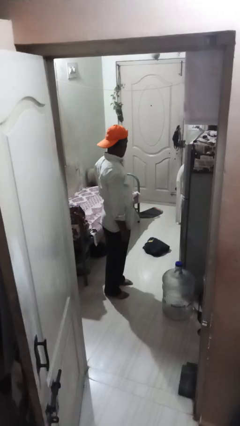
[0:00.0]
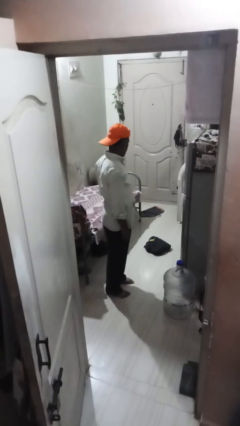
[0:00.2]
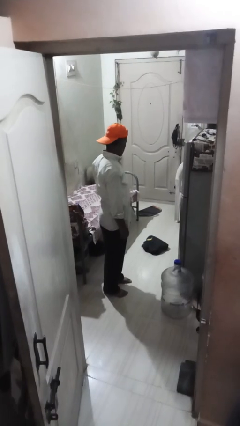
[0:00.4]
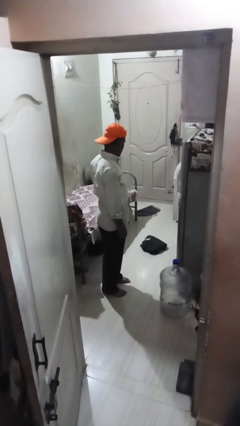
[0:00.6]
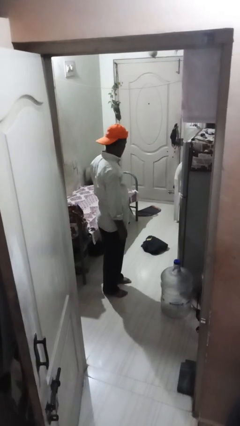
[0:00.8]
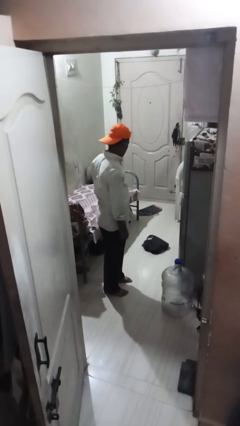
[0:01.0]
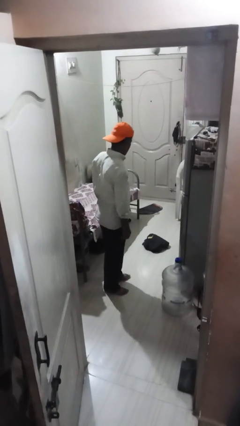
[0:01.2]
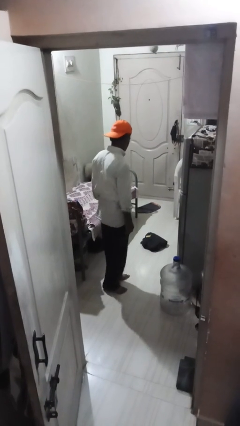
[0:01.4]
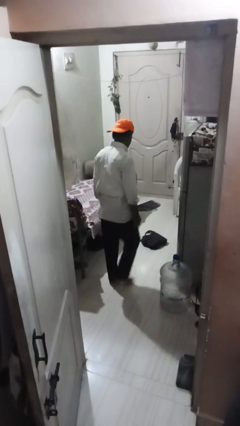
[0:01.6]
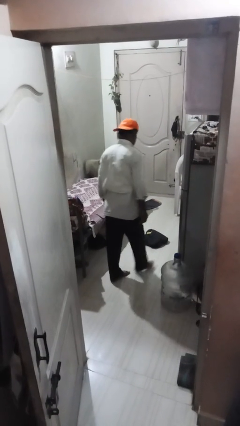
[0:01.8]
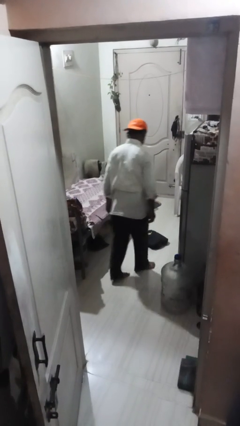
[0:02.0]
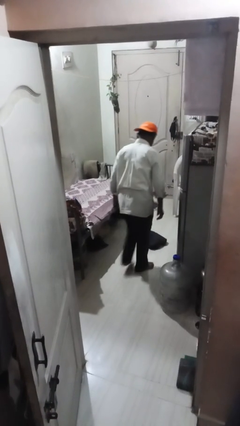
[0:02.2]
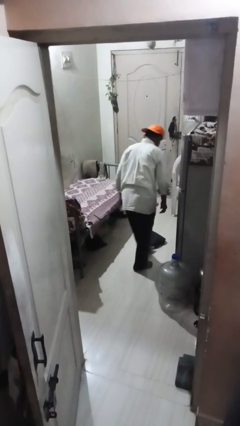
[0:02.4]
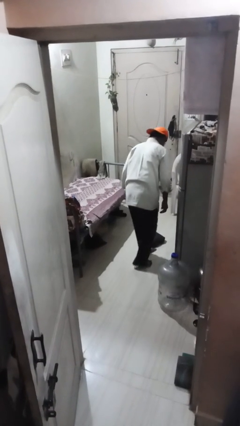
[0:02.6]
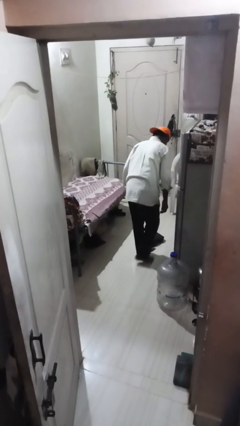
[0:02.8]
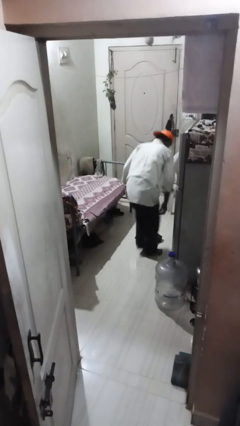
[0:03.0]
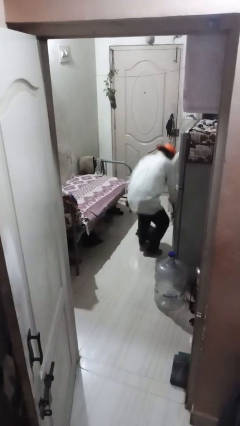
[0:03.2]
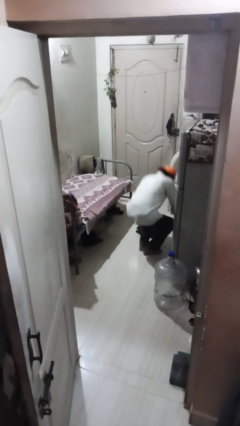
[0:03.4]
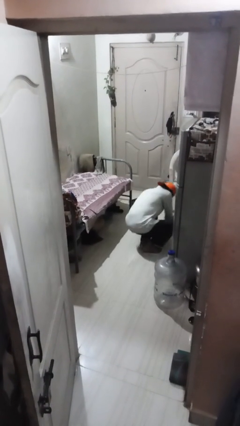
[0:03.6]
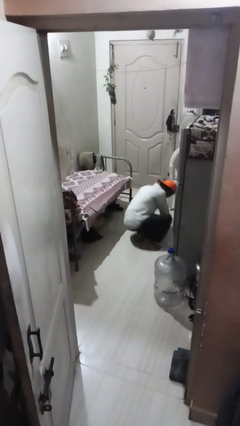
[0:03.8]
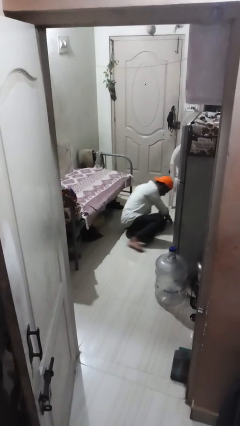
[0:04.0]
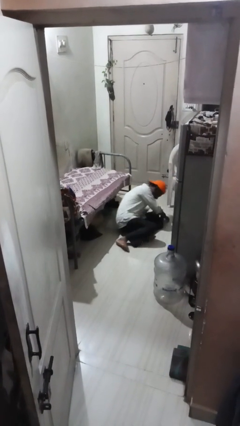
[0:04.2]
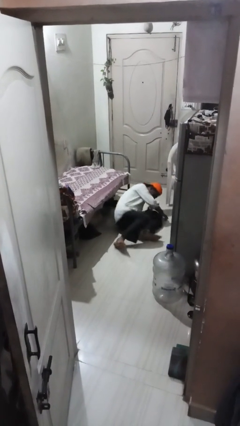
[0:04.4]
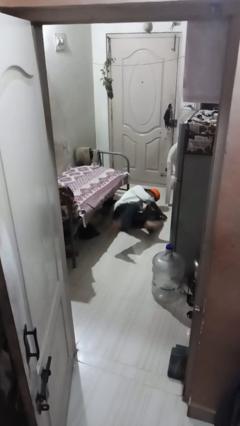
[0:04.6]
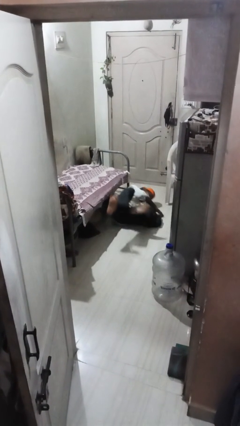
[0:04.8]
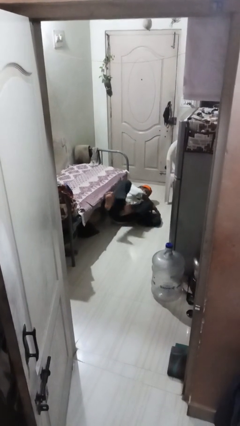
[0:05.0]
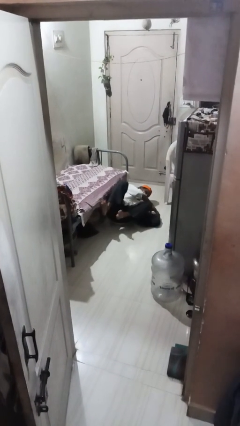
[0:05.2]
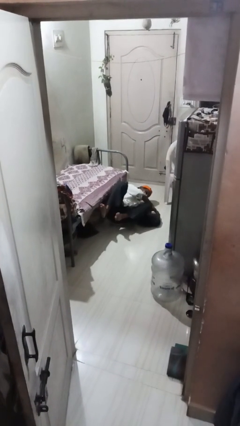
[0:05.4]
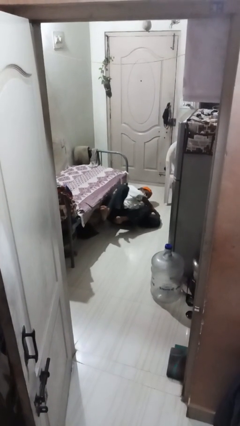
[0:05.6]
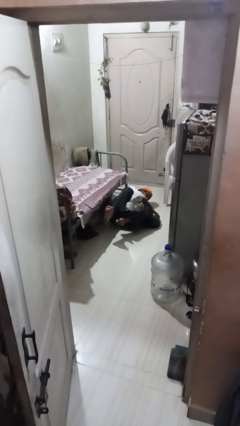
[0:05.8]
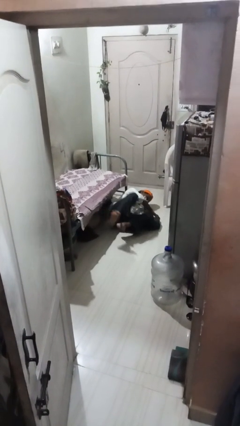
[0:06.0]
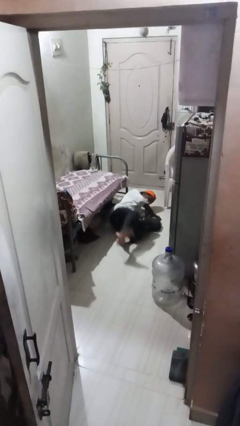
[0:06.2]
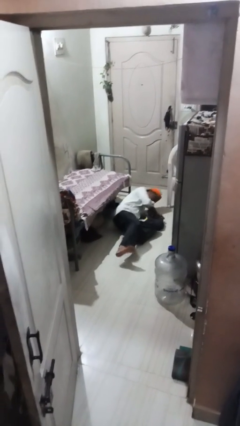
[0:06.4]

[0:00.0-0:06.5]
person trips on object on floor

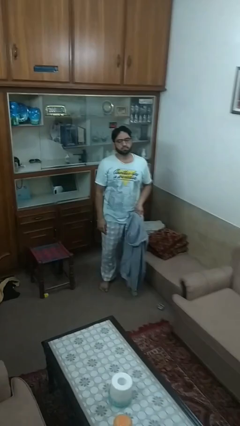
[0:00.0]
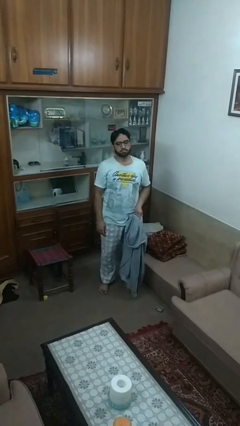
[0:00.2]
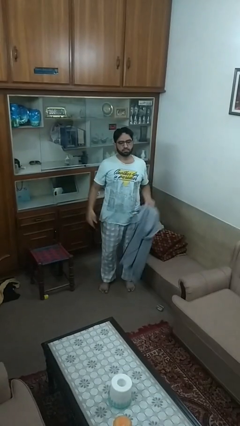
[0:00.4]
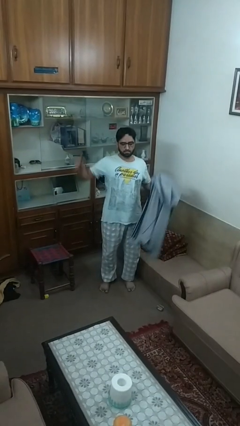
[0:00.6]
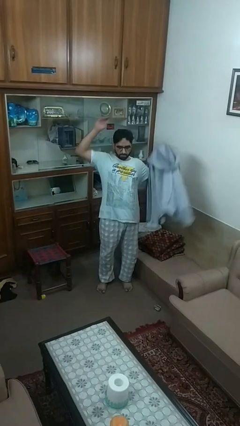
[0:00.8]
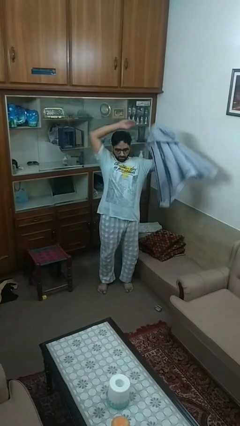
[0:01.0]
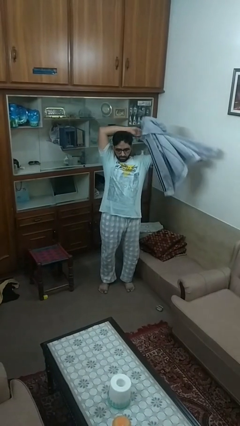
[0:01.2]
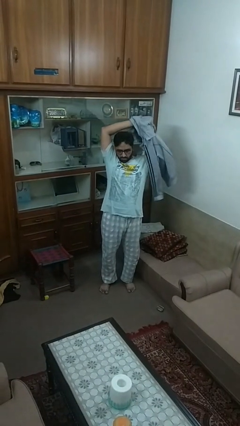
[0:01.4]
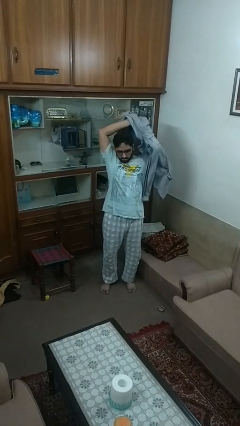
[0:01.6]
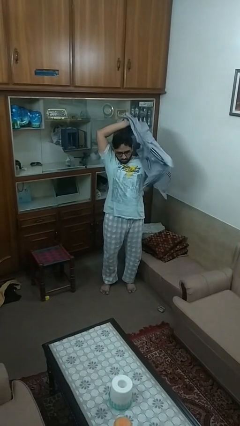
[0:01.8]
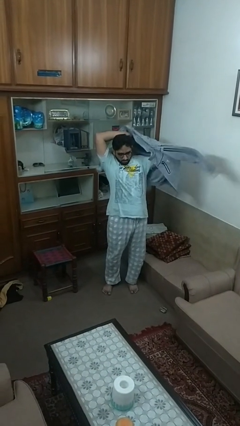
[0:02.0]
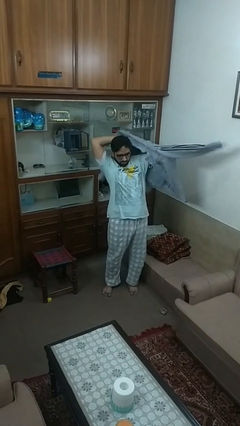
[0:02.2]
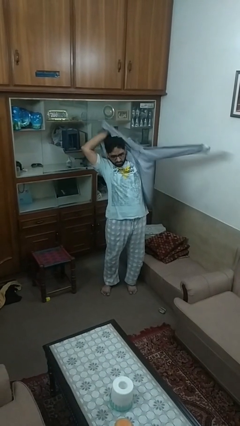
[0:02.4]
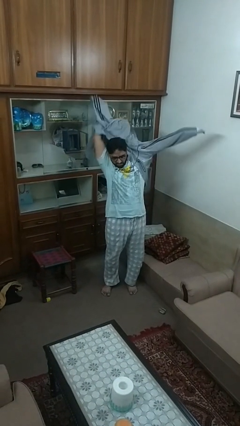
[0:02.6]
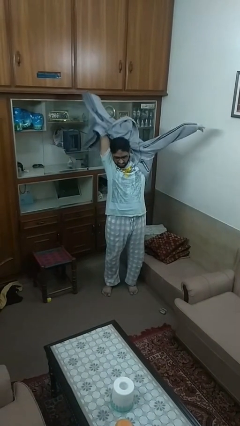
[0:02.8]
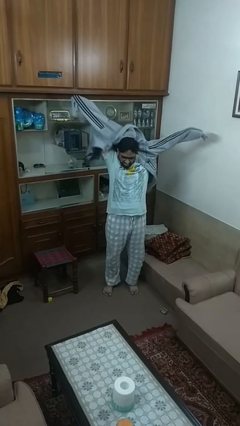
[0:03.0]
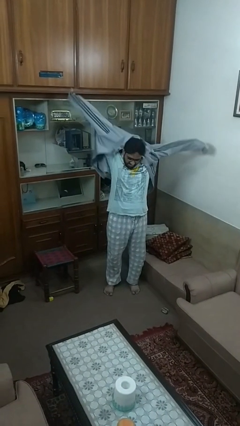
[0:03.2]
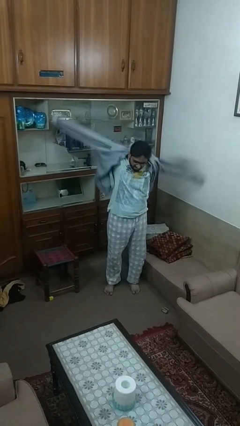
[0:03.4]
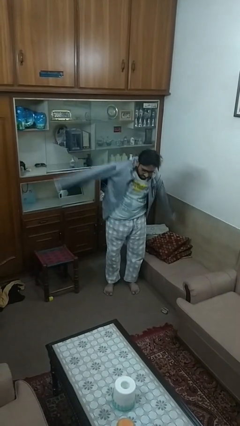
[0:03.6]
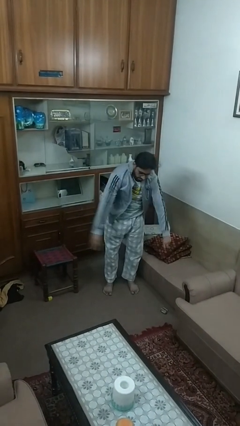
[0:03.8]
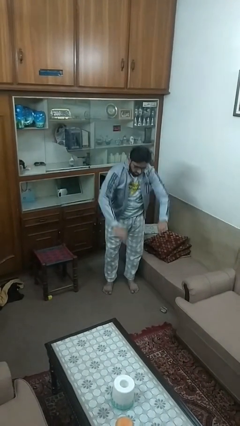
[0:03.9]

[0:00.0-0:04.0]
person puts on jacket

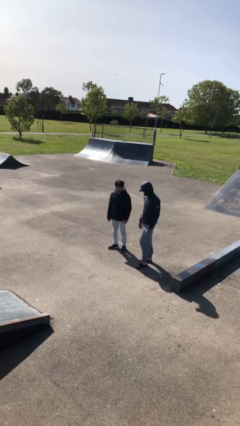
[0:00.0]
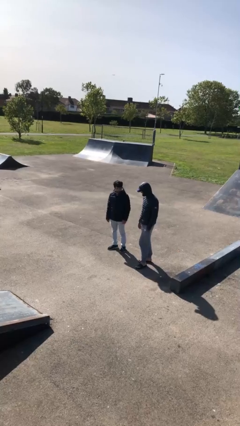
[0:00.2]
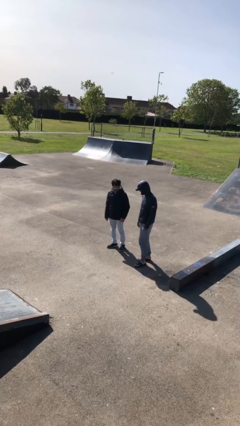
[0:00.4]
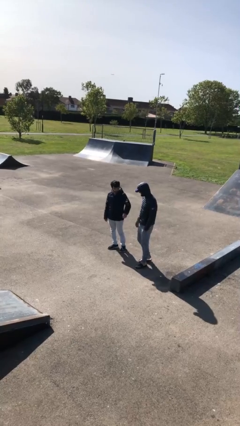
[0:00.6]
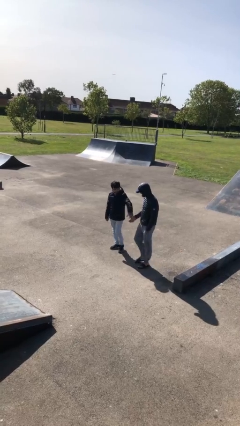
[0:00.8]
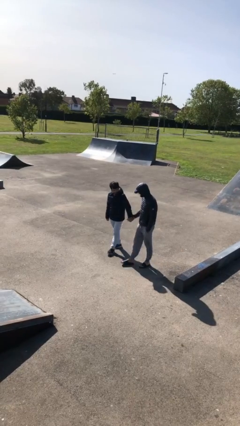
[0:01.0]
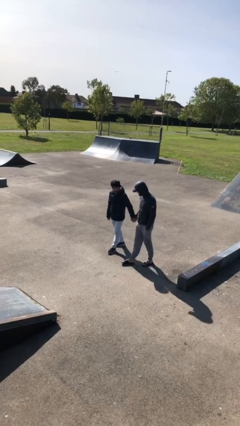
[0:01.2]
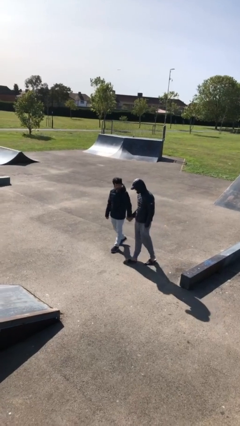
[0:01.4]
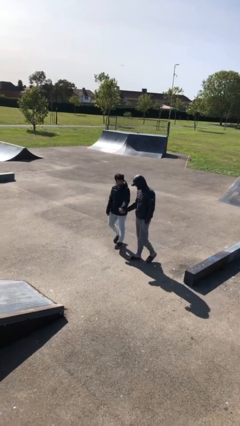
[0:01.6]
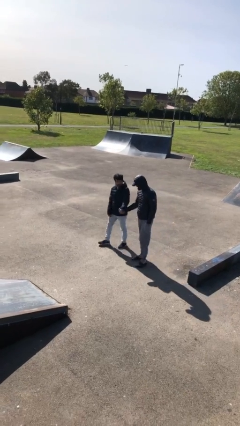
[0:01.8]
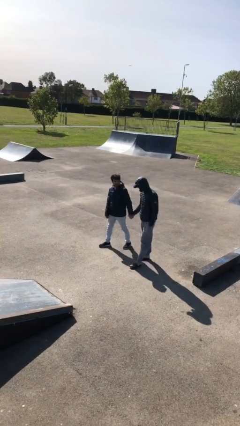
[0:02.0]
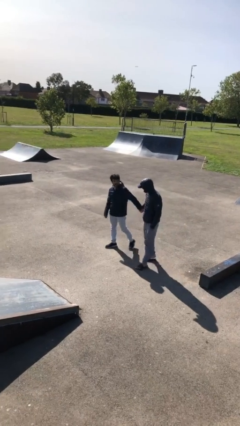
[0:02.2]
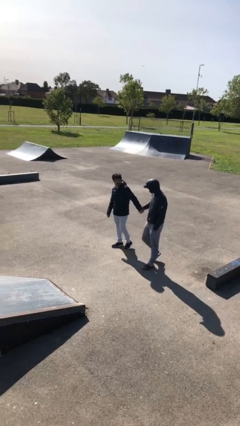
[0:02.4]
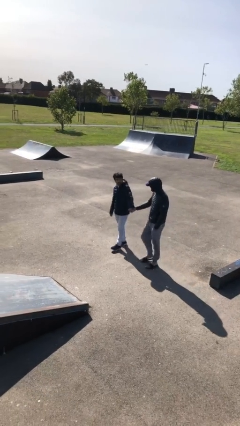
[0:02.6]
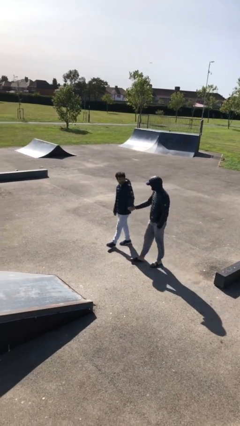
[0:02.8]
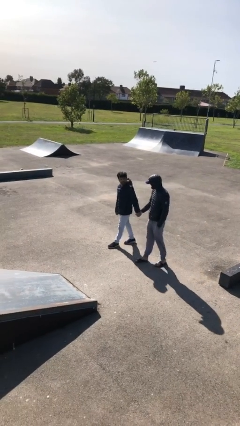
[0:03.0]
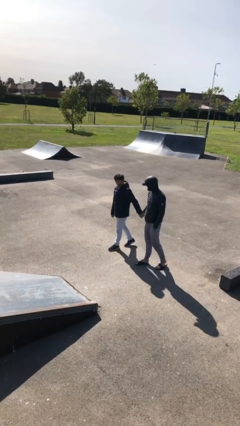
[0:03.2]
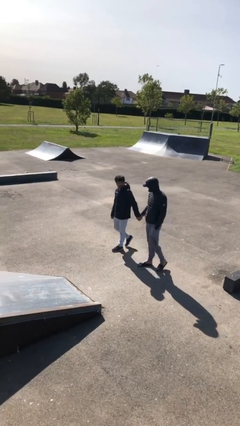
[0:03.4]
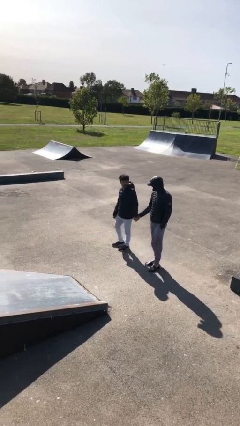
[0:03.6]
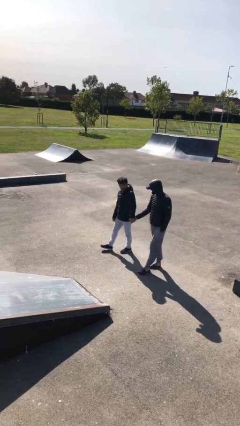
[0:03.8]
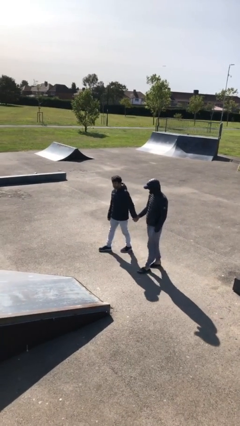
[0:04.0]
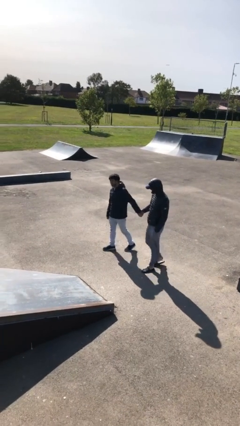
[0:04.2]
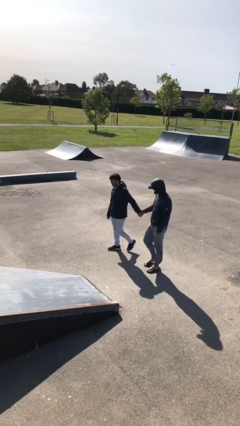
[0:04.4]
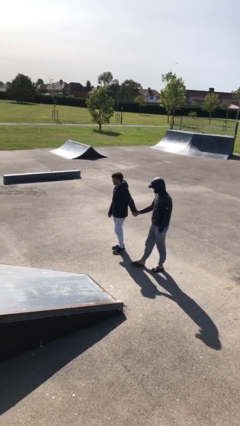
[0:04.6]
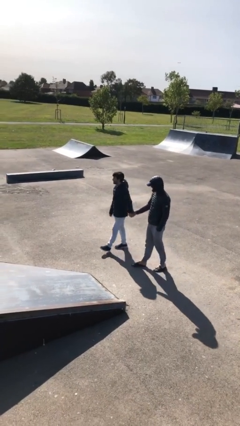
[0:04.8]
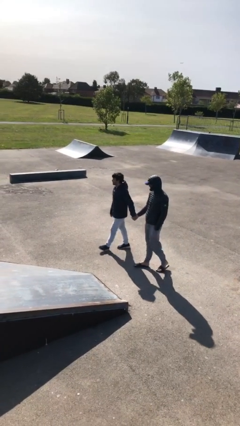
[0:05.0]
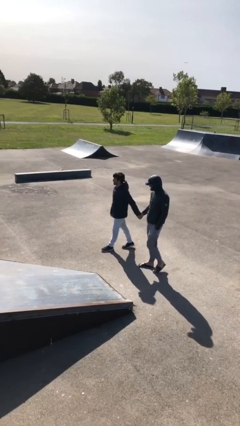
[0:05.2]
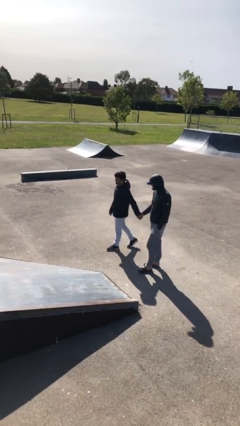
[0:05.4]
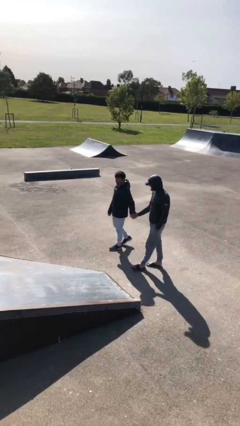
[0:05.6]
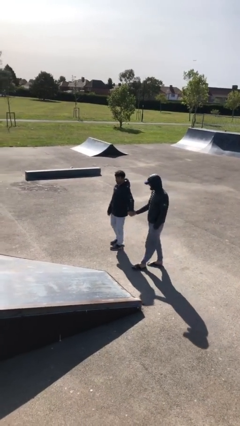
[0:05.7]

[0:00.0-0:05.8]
person holds hand

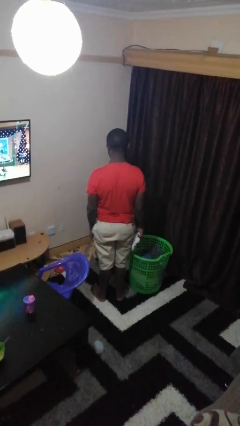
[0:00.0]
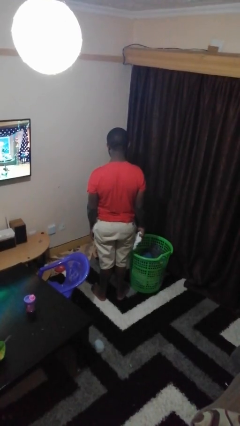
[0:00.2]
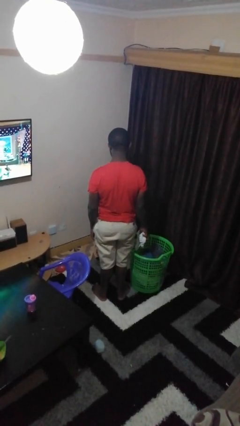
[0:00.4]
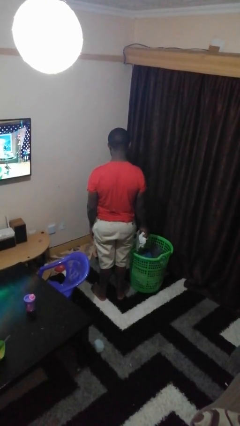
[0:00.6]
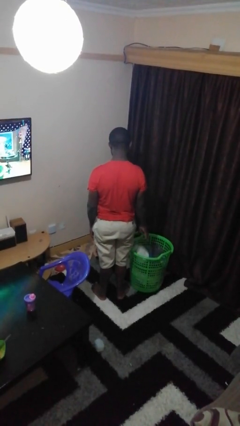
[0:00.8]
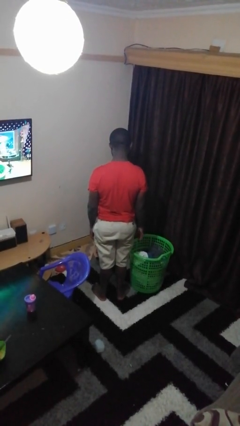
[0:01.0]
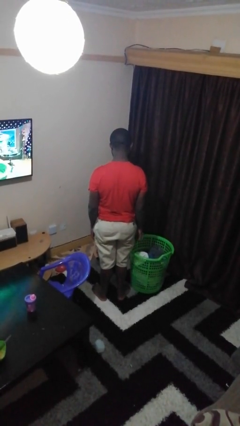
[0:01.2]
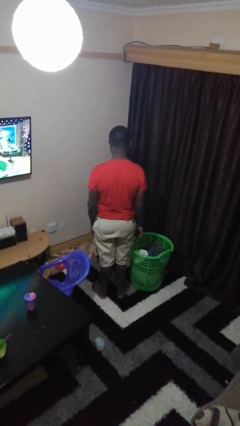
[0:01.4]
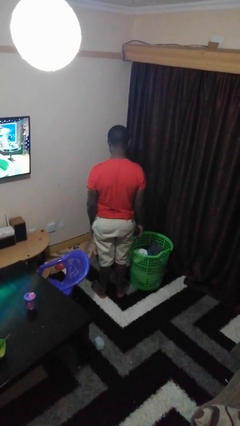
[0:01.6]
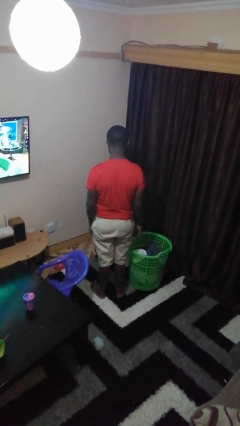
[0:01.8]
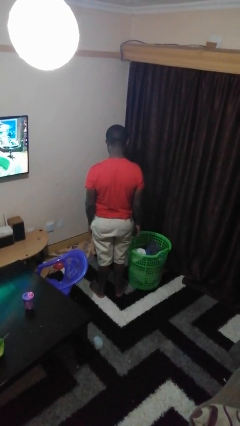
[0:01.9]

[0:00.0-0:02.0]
person puts object into basket
